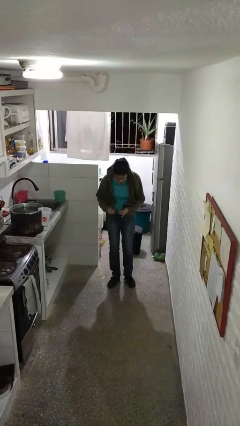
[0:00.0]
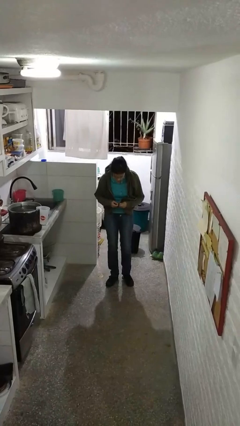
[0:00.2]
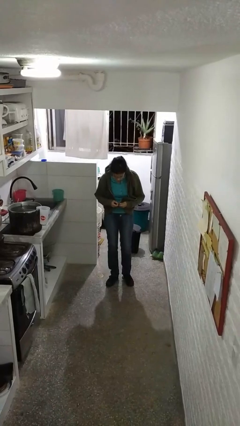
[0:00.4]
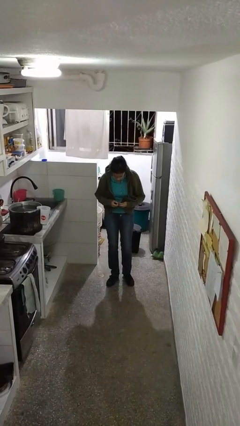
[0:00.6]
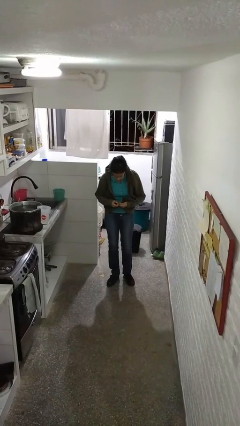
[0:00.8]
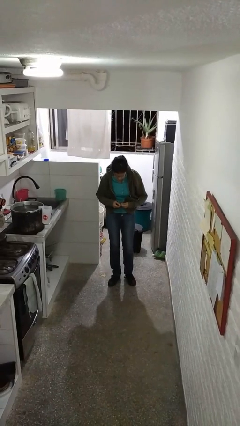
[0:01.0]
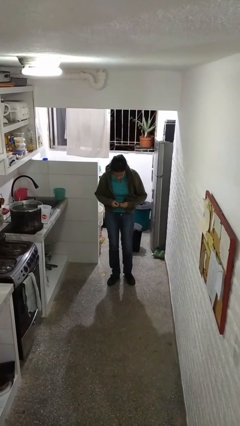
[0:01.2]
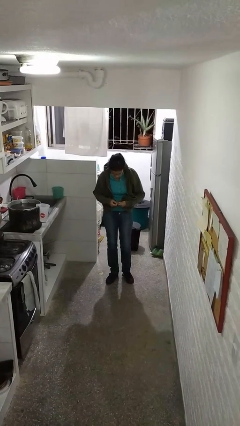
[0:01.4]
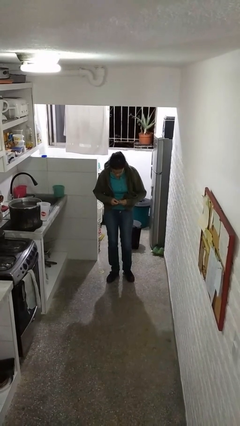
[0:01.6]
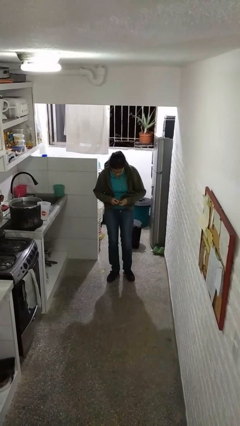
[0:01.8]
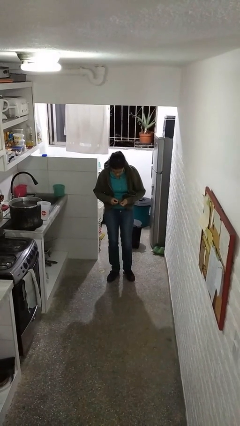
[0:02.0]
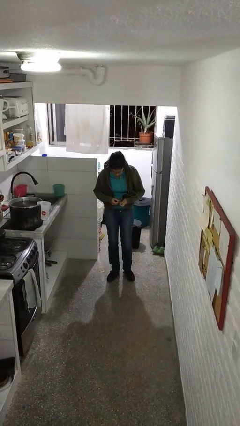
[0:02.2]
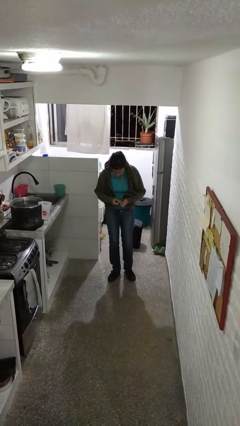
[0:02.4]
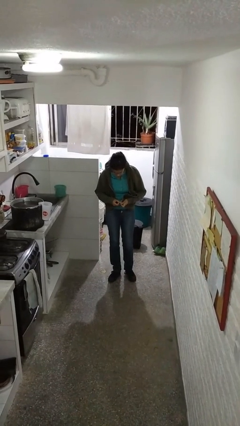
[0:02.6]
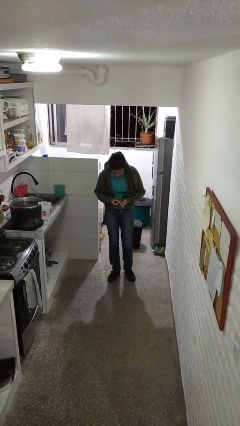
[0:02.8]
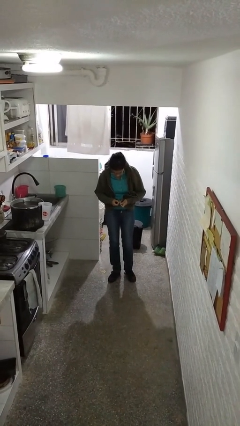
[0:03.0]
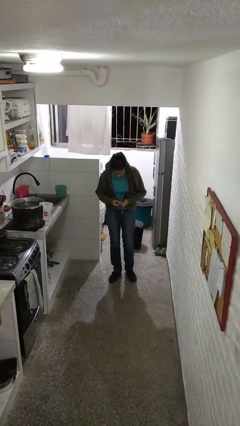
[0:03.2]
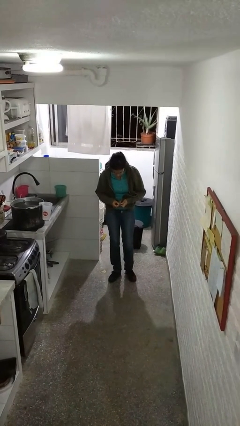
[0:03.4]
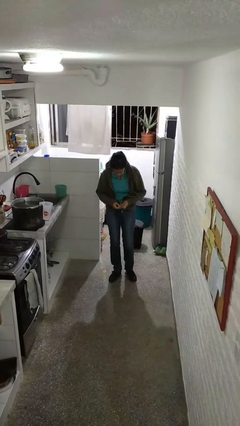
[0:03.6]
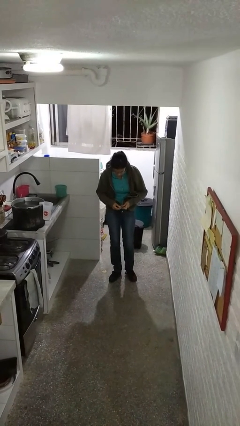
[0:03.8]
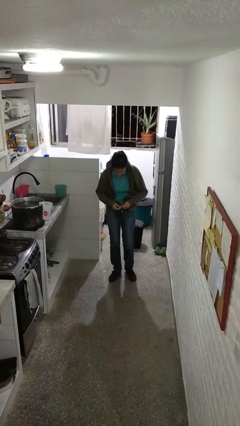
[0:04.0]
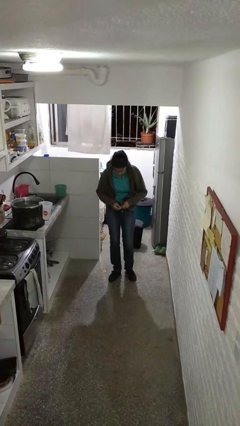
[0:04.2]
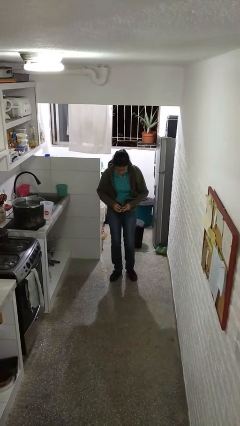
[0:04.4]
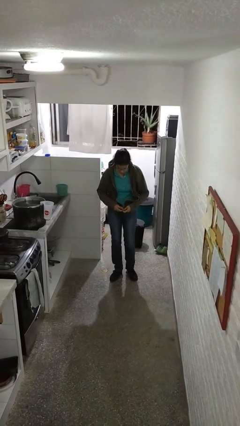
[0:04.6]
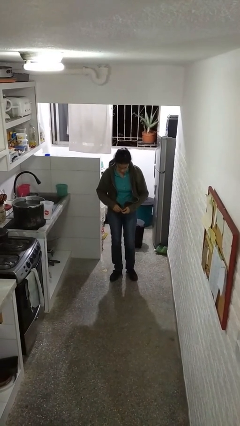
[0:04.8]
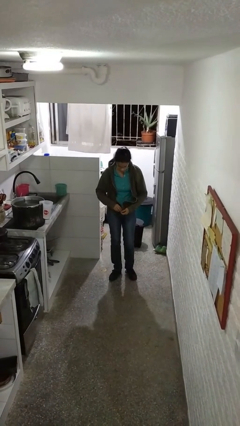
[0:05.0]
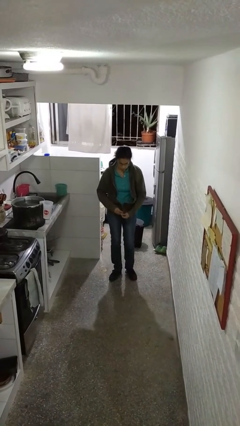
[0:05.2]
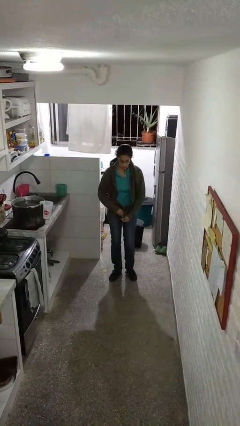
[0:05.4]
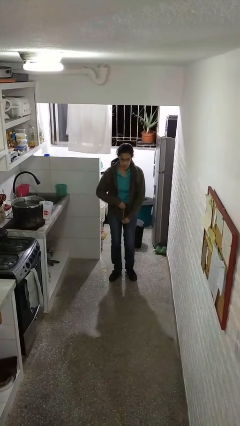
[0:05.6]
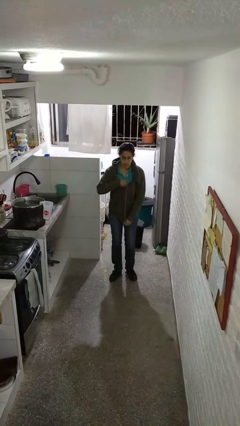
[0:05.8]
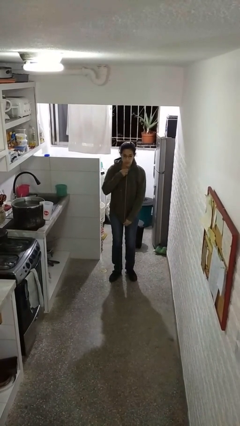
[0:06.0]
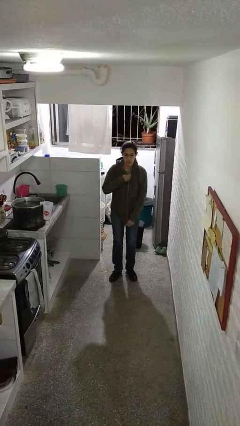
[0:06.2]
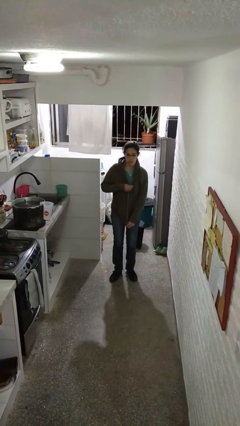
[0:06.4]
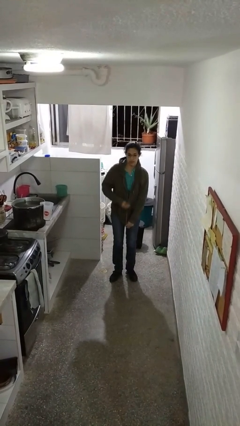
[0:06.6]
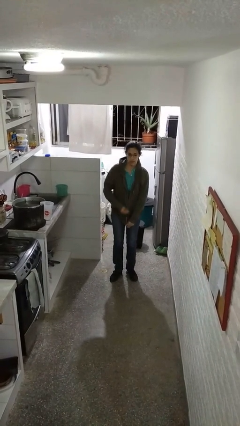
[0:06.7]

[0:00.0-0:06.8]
person zips up jacket

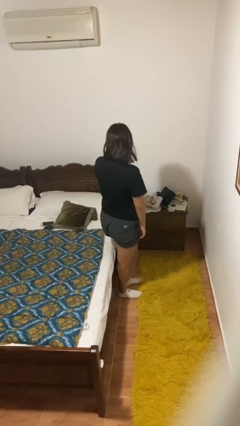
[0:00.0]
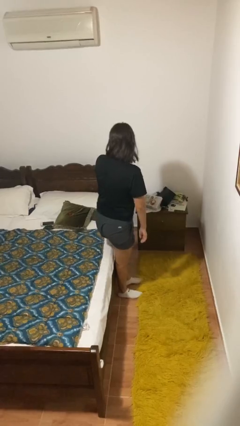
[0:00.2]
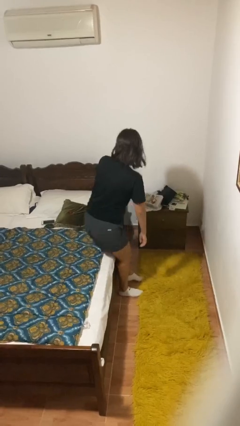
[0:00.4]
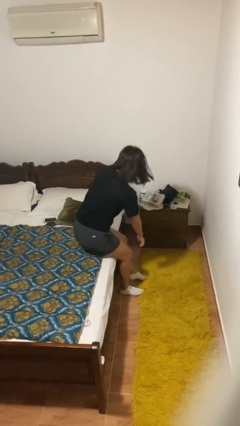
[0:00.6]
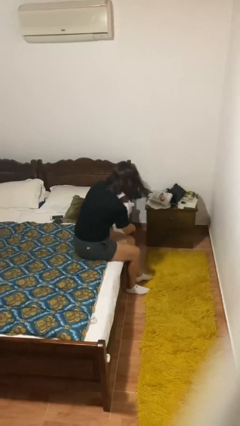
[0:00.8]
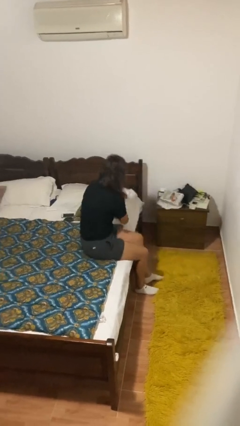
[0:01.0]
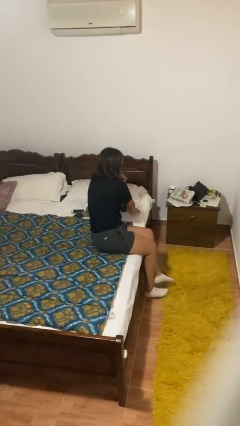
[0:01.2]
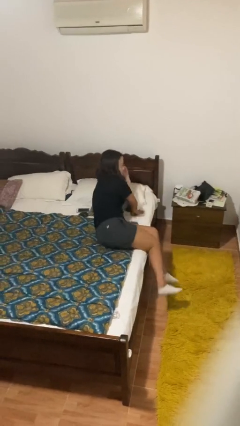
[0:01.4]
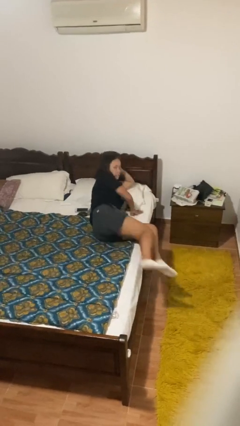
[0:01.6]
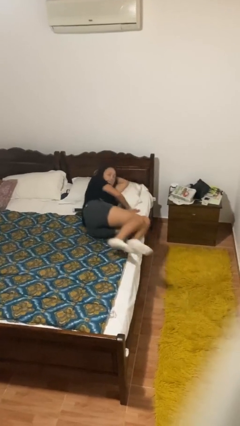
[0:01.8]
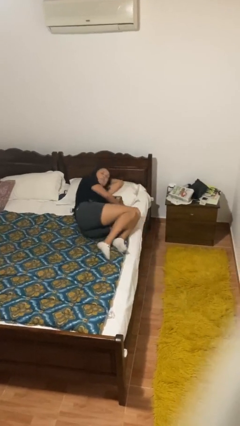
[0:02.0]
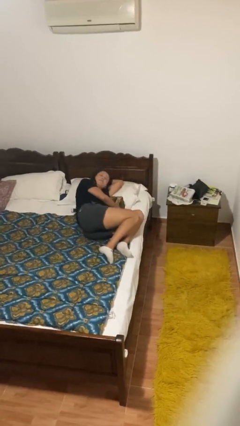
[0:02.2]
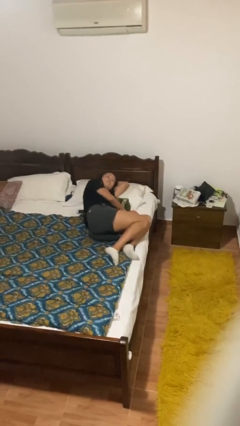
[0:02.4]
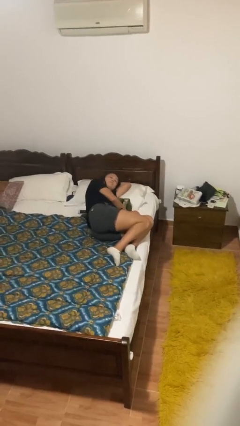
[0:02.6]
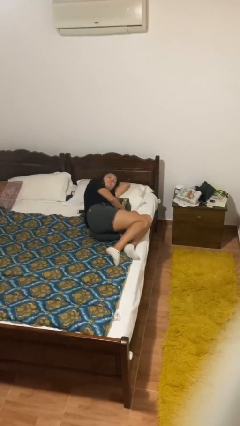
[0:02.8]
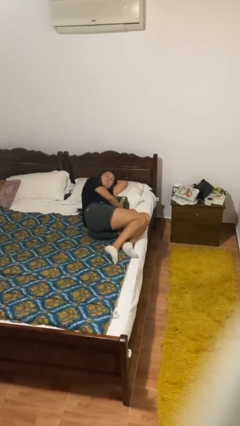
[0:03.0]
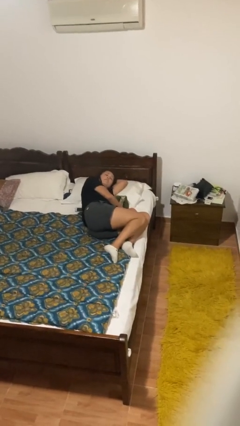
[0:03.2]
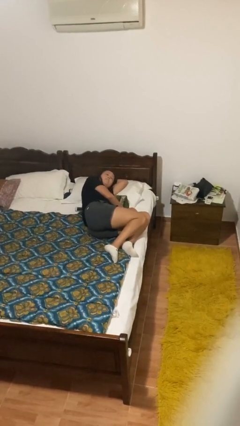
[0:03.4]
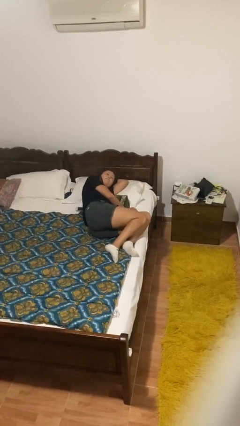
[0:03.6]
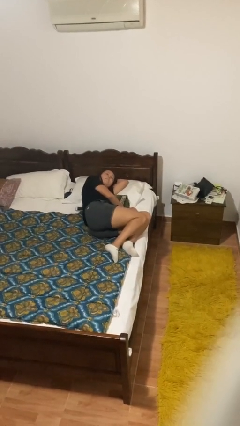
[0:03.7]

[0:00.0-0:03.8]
person lies down on bed

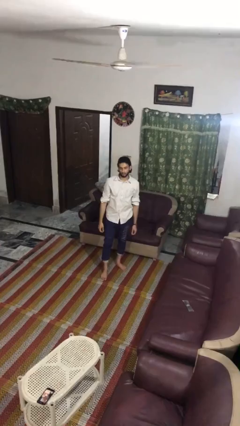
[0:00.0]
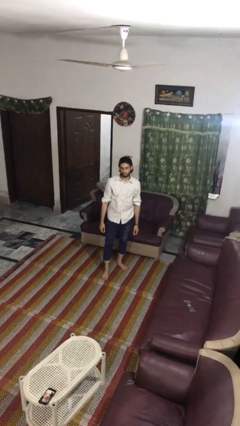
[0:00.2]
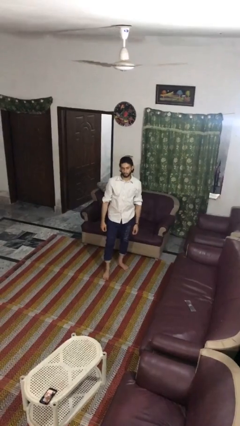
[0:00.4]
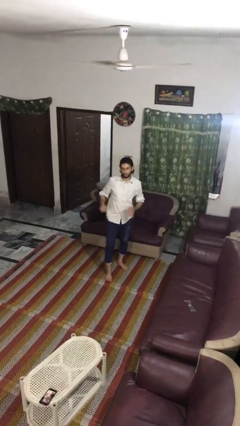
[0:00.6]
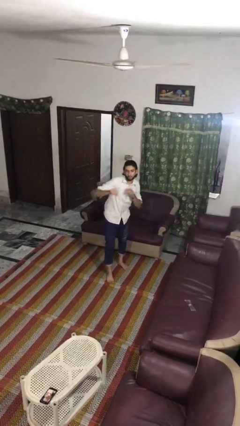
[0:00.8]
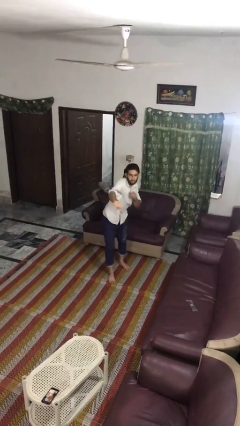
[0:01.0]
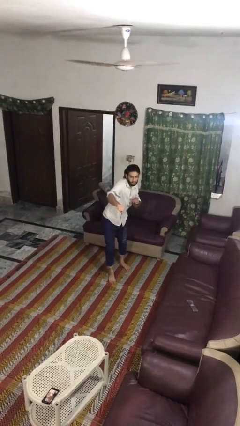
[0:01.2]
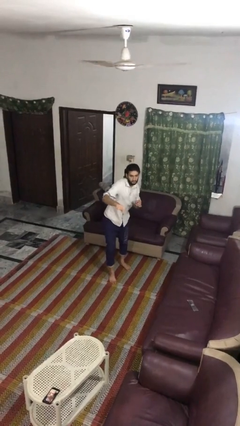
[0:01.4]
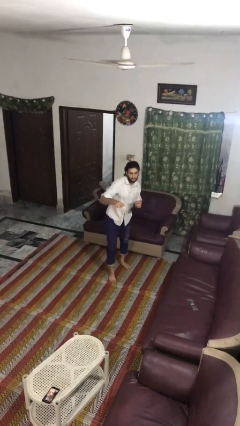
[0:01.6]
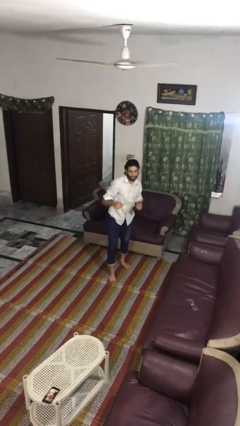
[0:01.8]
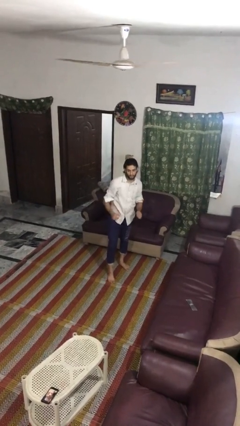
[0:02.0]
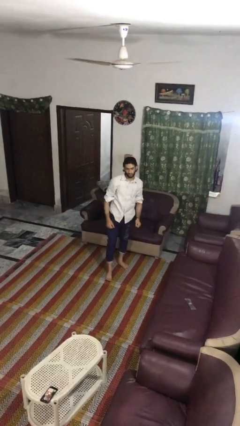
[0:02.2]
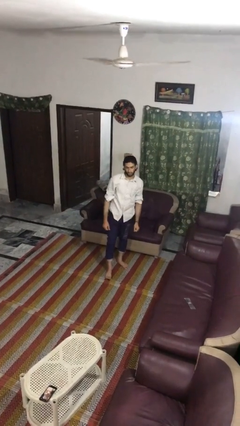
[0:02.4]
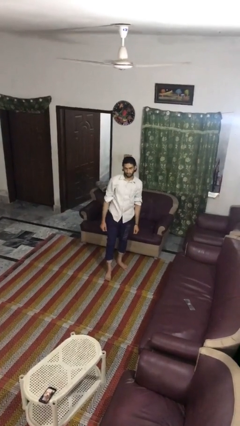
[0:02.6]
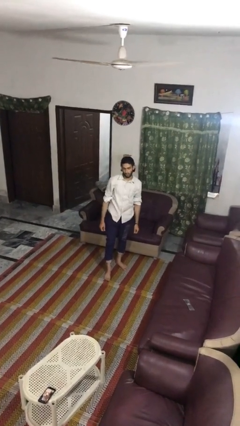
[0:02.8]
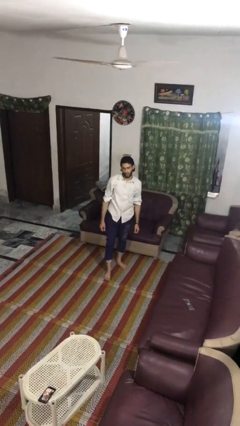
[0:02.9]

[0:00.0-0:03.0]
person punches

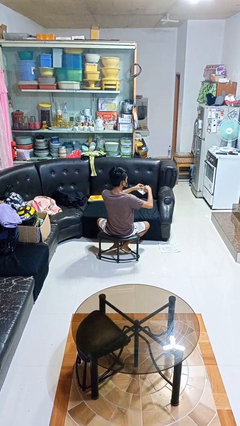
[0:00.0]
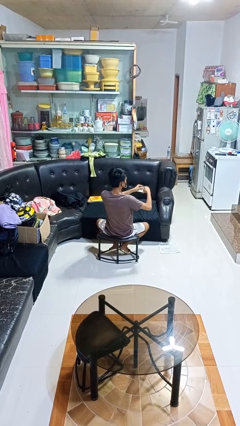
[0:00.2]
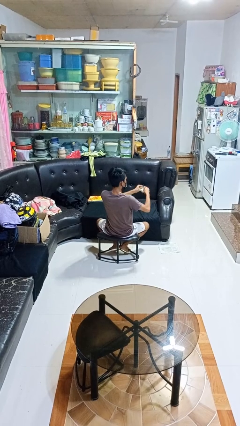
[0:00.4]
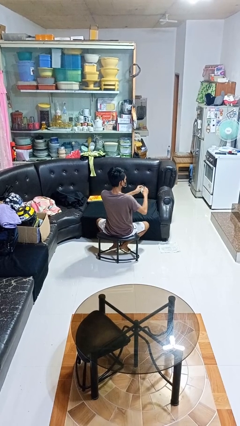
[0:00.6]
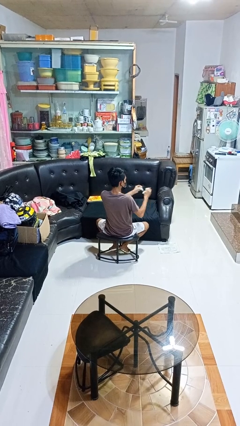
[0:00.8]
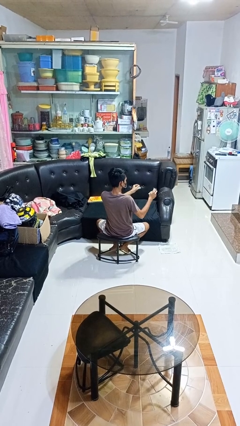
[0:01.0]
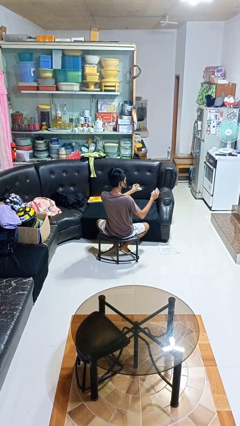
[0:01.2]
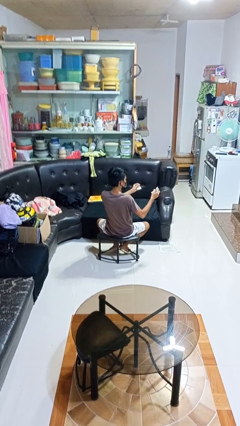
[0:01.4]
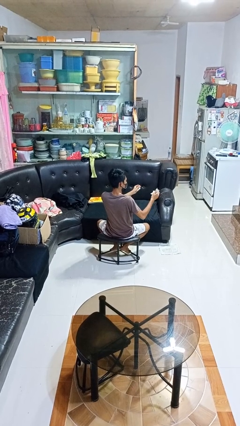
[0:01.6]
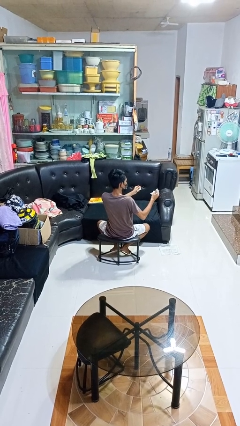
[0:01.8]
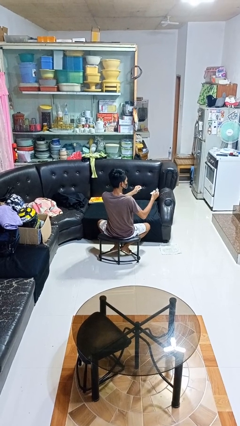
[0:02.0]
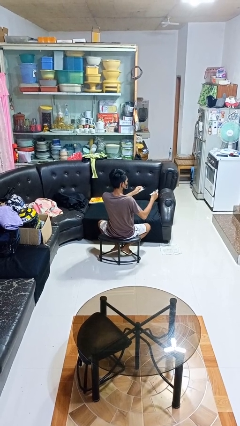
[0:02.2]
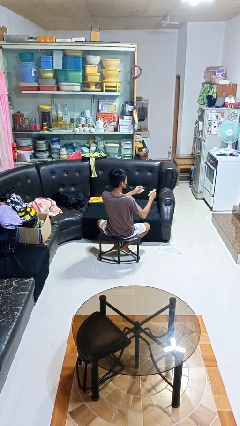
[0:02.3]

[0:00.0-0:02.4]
person tears paper

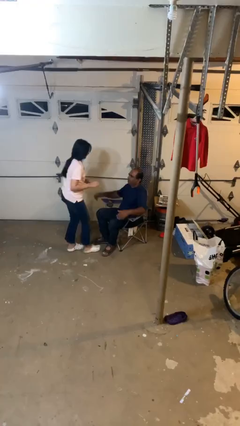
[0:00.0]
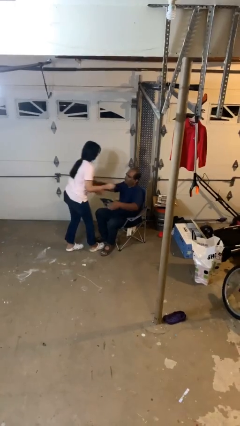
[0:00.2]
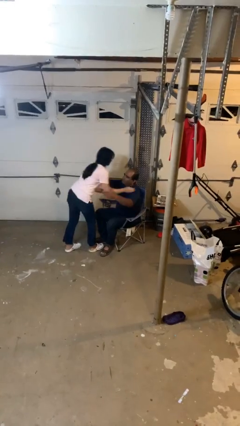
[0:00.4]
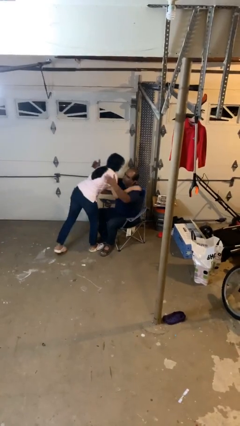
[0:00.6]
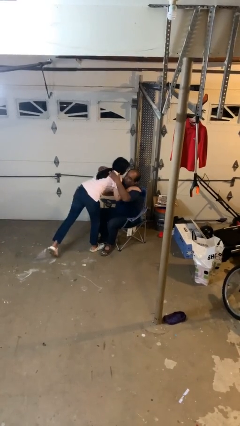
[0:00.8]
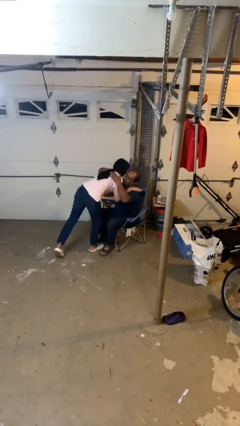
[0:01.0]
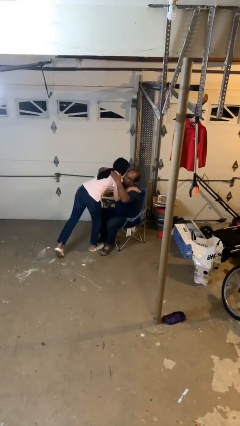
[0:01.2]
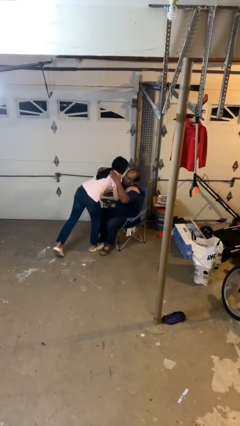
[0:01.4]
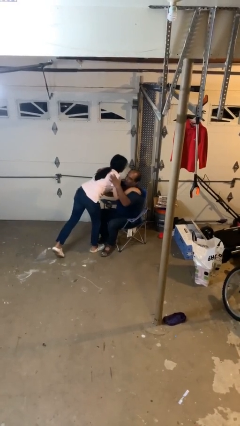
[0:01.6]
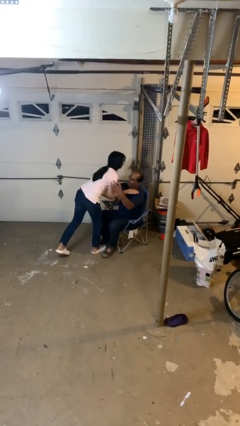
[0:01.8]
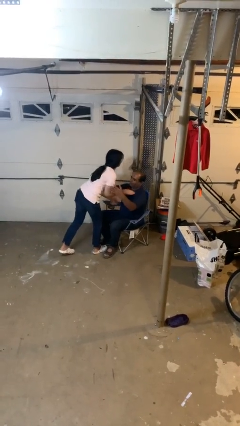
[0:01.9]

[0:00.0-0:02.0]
person embraces person
